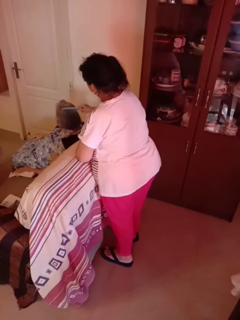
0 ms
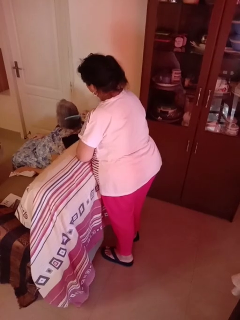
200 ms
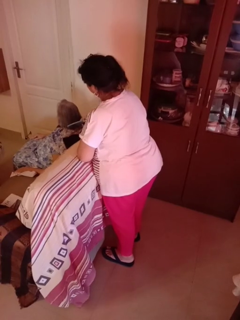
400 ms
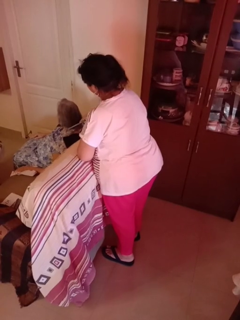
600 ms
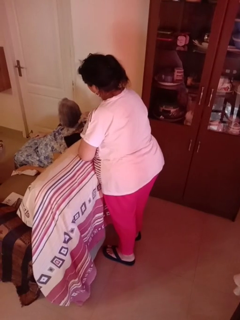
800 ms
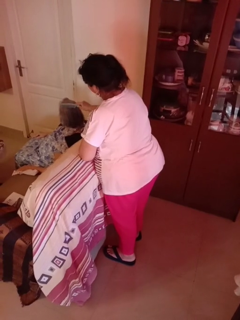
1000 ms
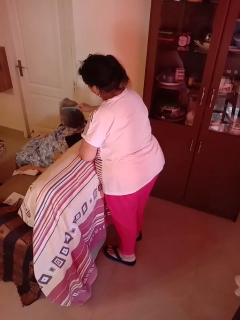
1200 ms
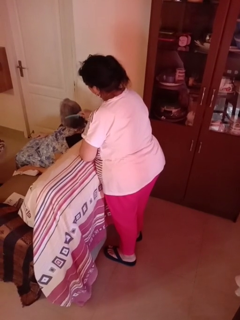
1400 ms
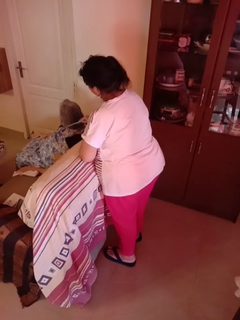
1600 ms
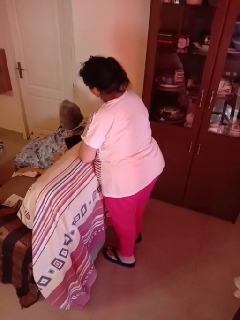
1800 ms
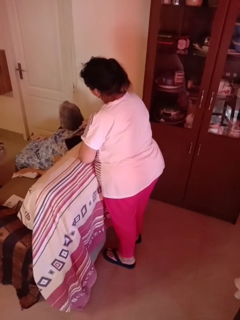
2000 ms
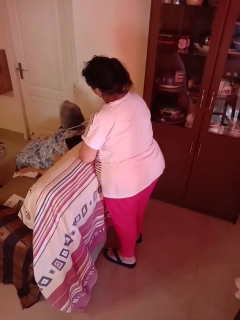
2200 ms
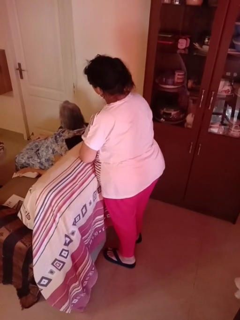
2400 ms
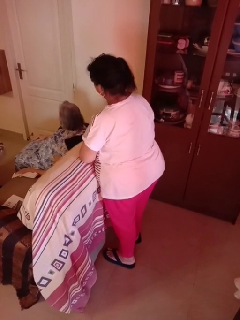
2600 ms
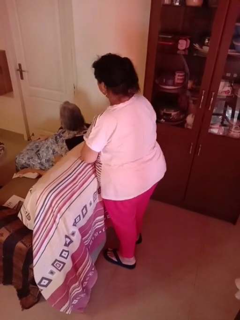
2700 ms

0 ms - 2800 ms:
person brushes hair of person

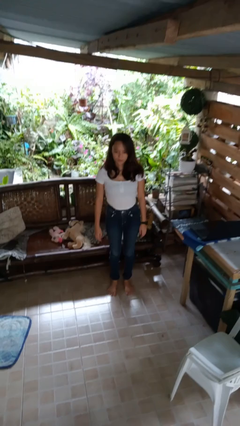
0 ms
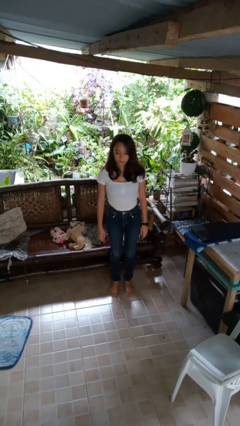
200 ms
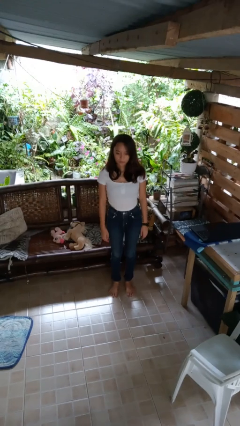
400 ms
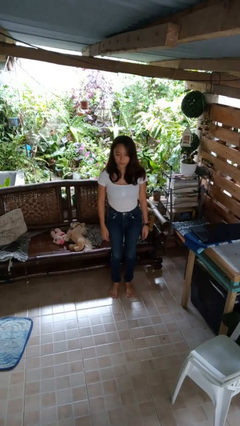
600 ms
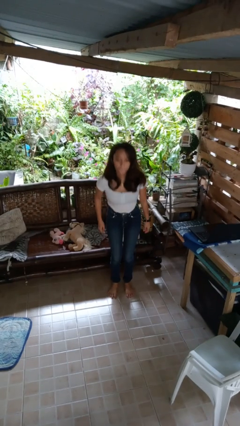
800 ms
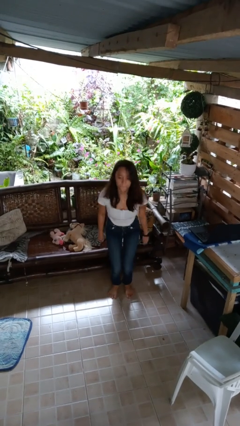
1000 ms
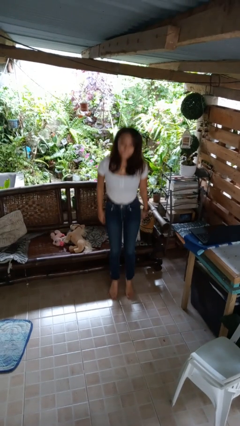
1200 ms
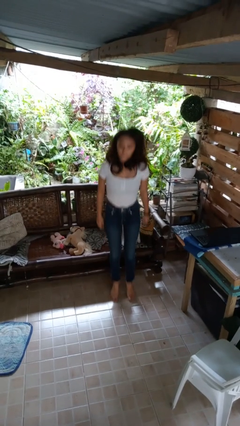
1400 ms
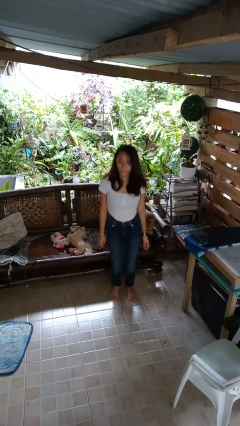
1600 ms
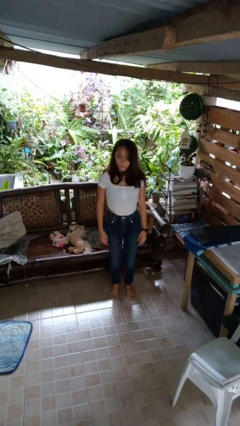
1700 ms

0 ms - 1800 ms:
person jumps

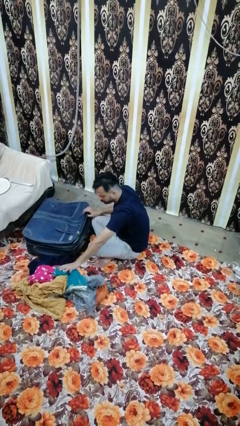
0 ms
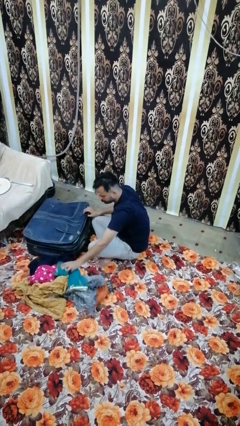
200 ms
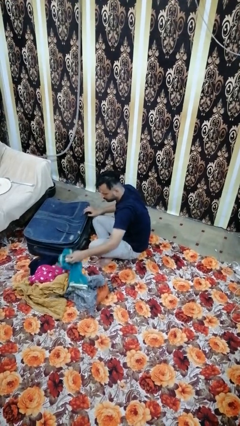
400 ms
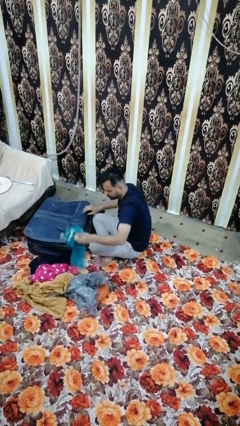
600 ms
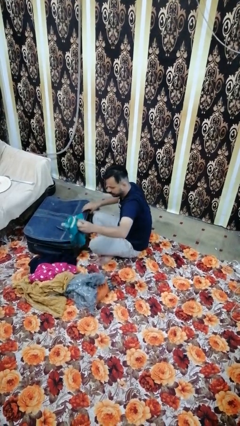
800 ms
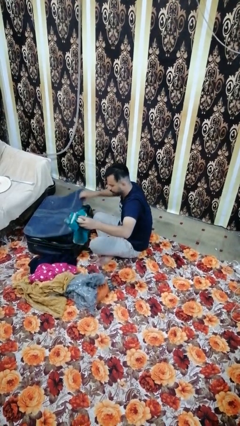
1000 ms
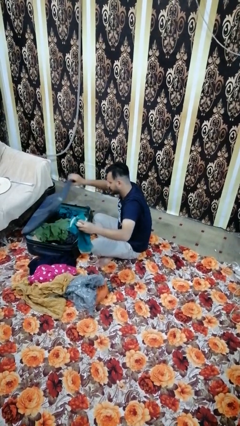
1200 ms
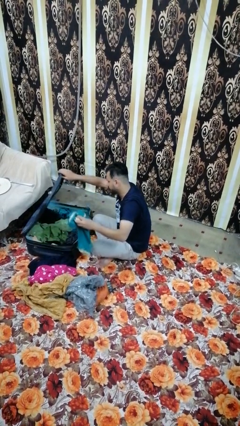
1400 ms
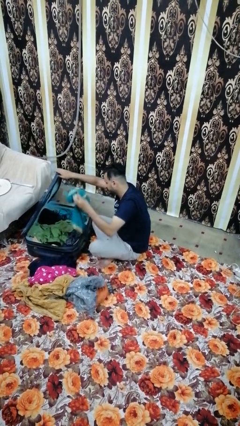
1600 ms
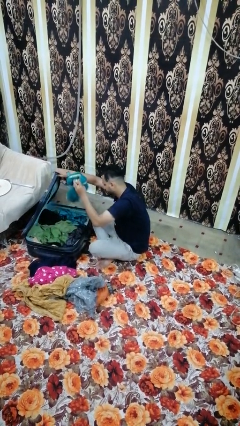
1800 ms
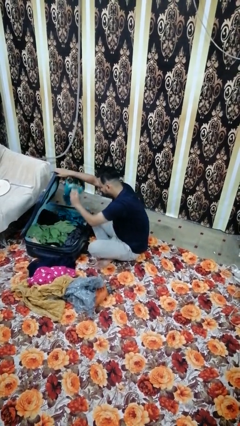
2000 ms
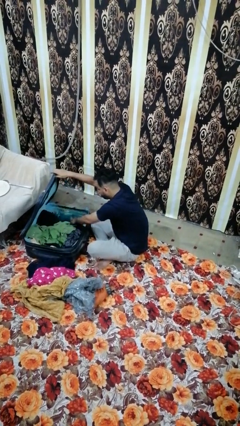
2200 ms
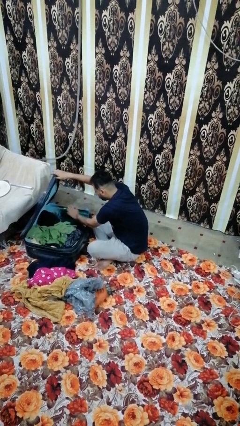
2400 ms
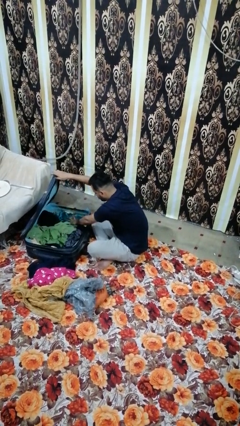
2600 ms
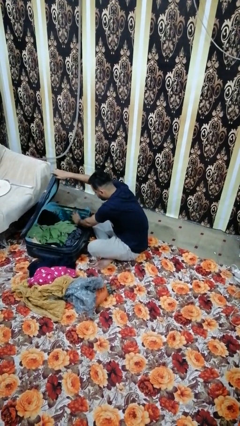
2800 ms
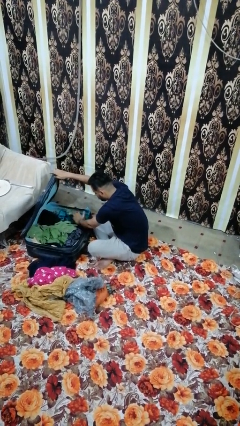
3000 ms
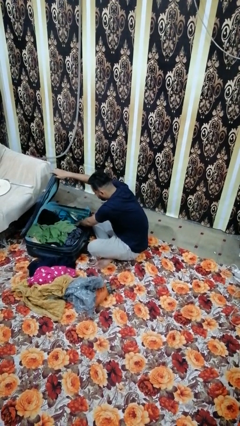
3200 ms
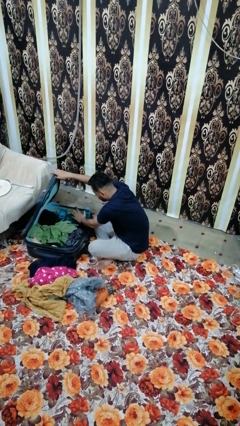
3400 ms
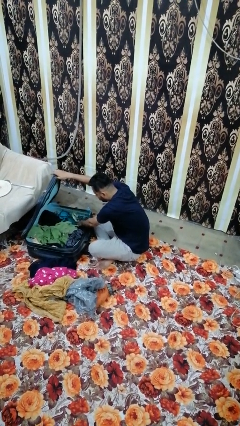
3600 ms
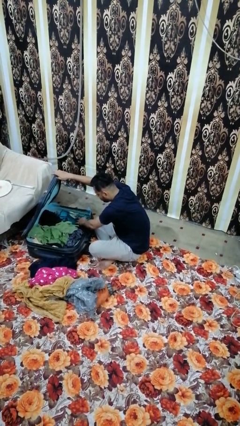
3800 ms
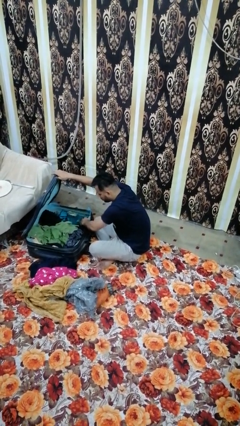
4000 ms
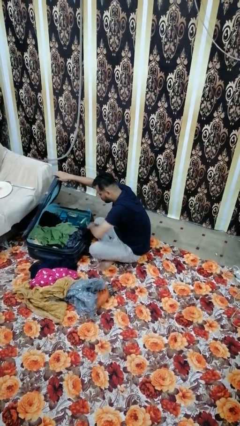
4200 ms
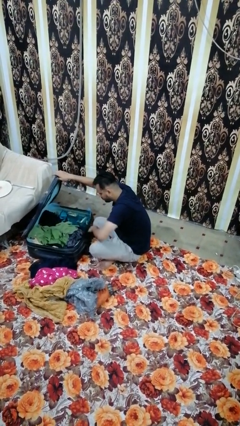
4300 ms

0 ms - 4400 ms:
person loads clothes into suitcase

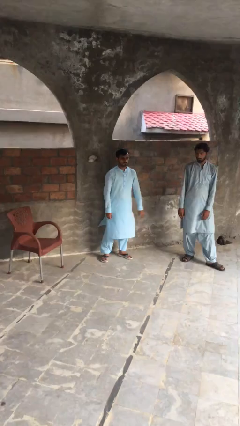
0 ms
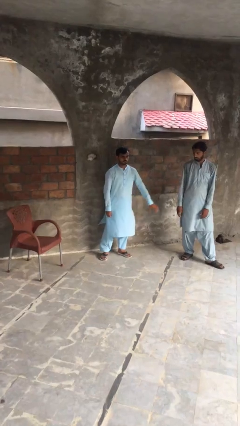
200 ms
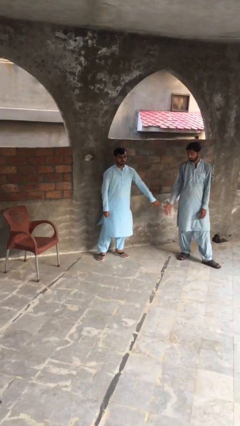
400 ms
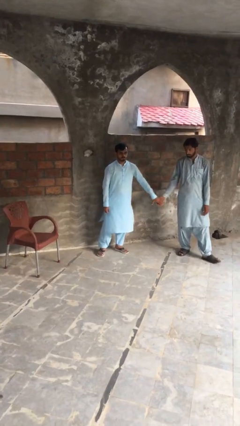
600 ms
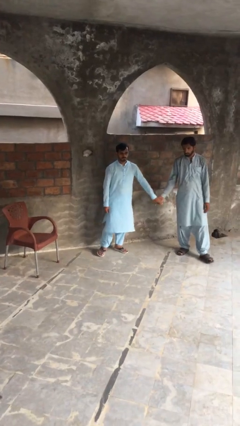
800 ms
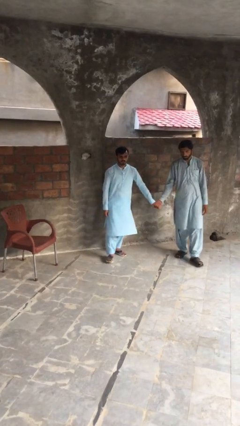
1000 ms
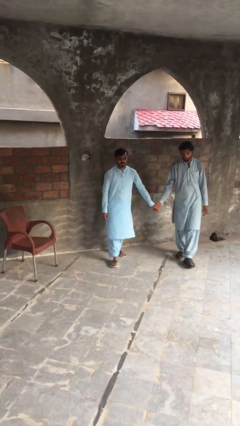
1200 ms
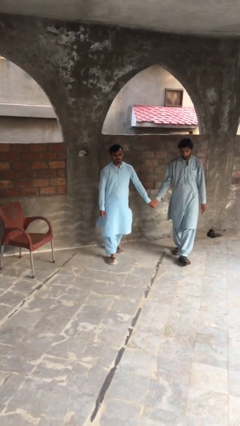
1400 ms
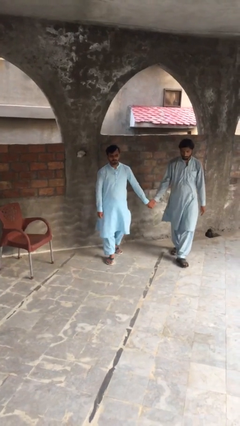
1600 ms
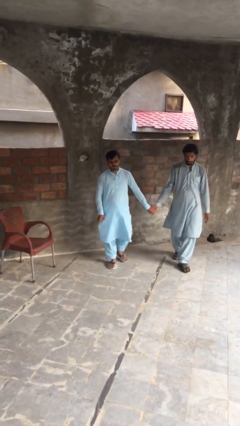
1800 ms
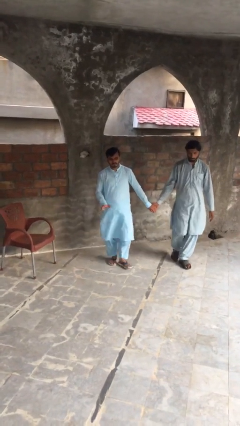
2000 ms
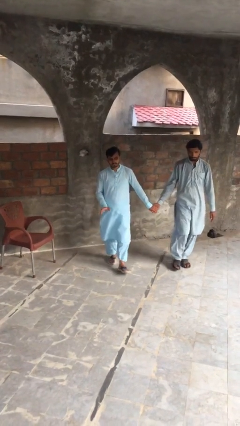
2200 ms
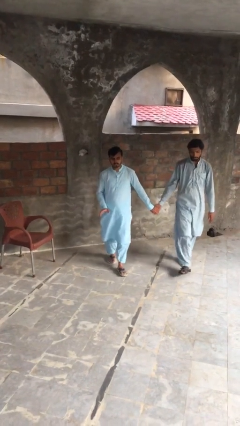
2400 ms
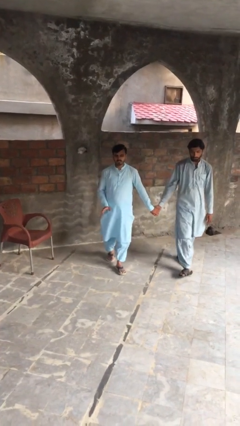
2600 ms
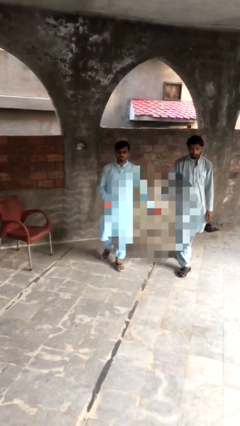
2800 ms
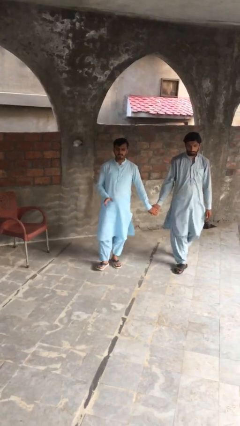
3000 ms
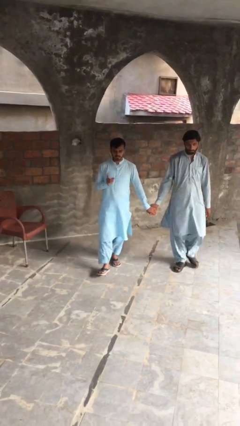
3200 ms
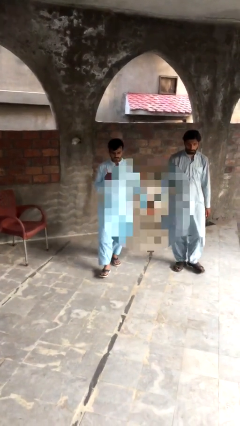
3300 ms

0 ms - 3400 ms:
person holds hand

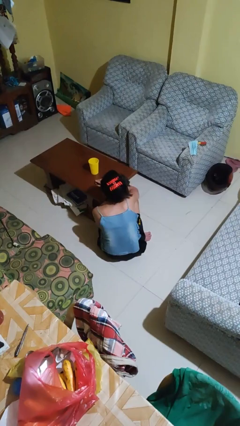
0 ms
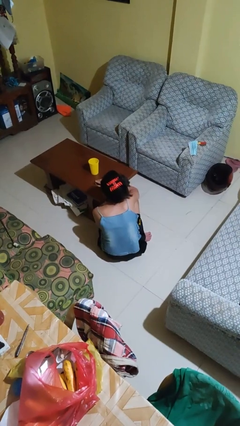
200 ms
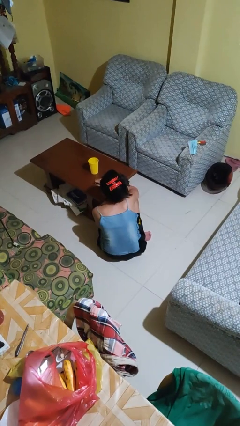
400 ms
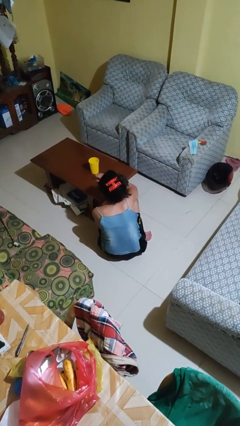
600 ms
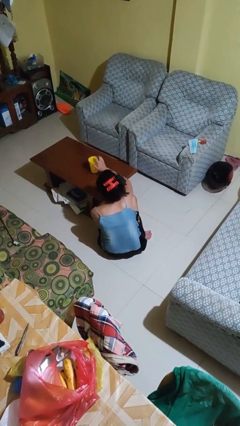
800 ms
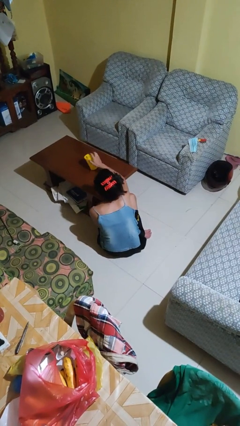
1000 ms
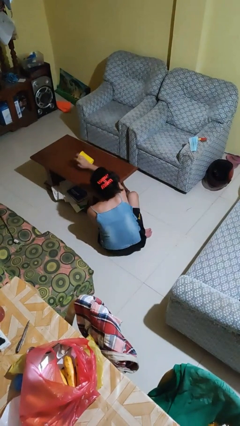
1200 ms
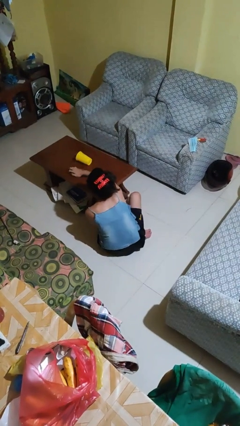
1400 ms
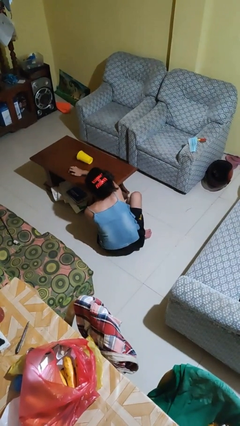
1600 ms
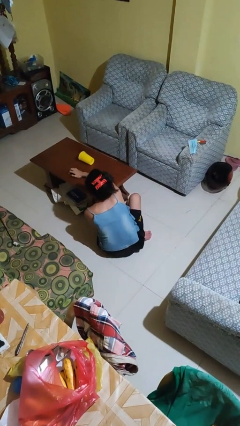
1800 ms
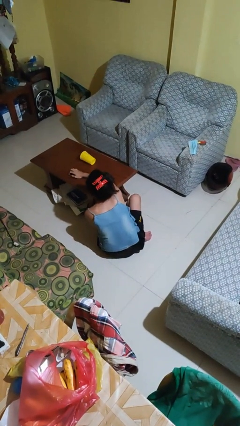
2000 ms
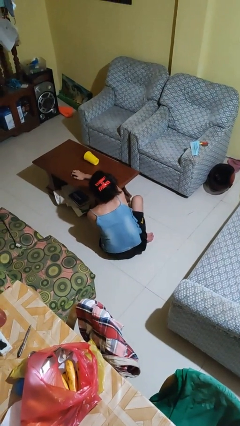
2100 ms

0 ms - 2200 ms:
person knocks over glass

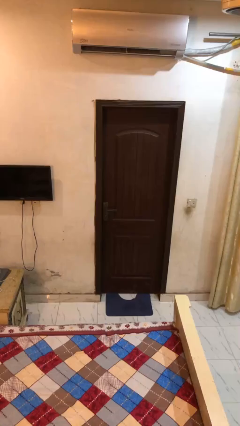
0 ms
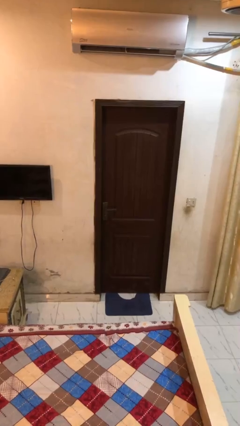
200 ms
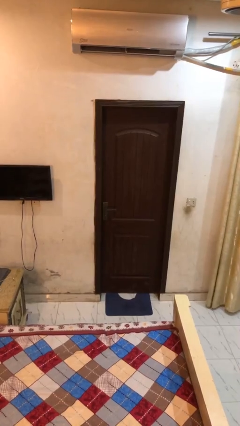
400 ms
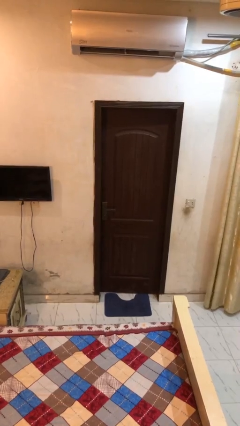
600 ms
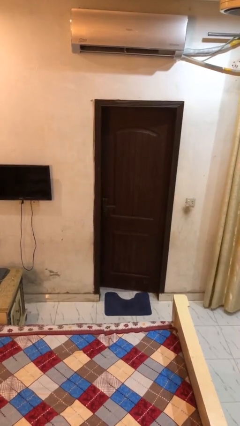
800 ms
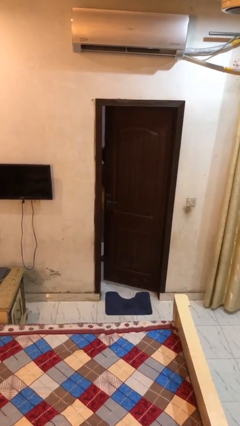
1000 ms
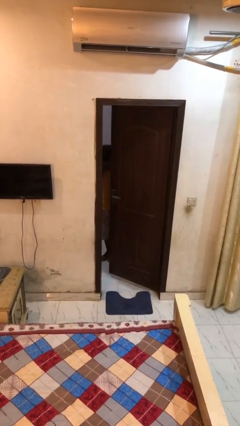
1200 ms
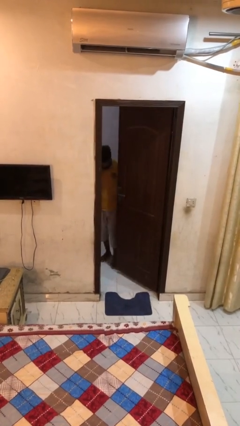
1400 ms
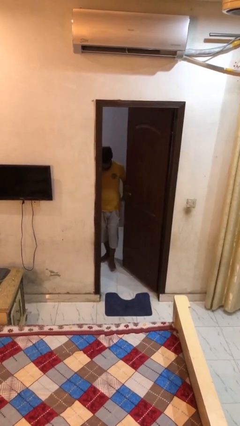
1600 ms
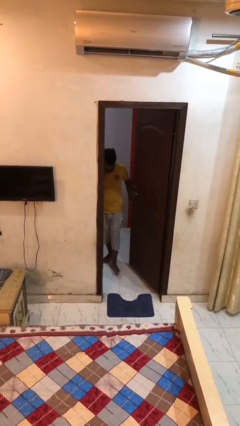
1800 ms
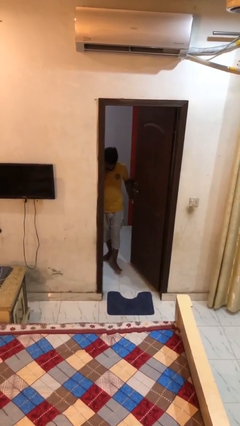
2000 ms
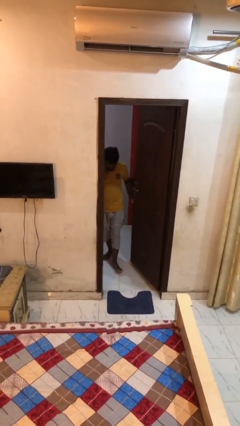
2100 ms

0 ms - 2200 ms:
person opens facility door

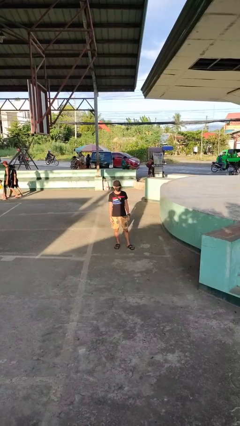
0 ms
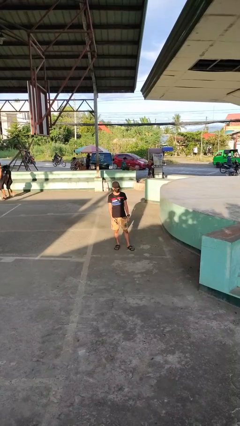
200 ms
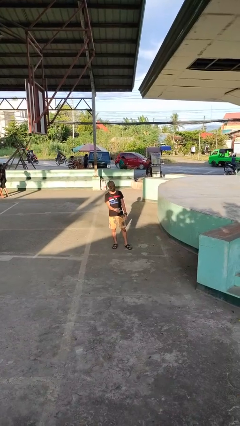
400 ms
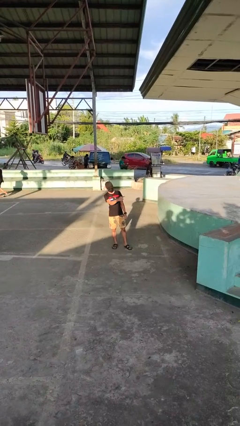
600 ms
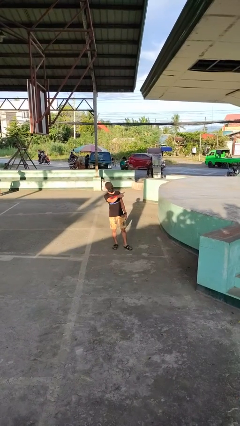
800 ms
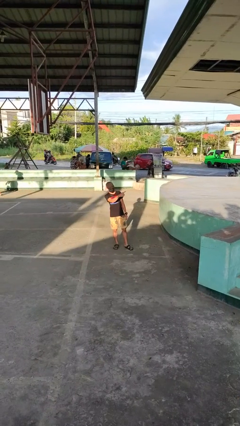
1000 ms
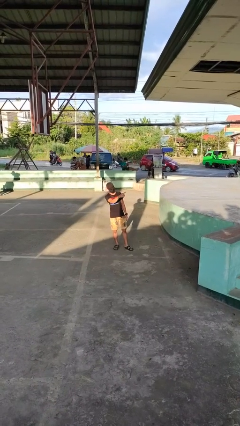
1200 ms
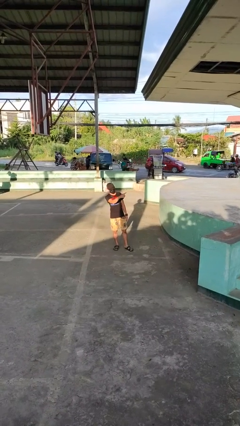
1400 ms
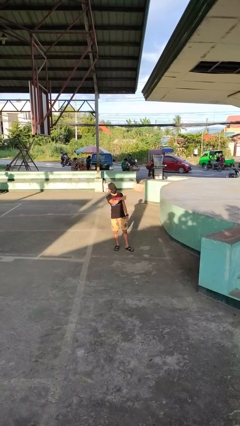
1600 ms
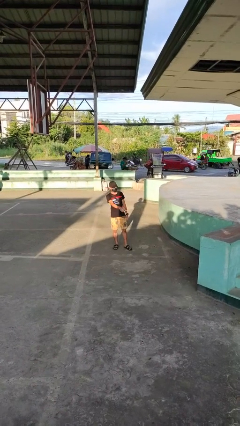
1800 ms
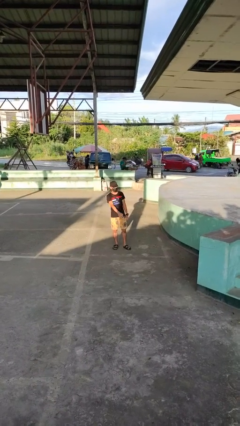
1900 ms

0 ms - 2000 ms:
person points at person
